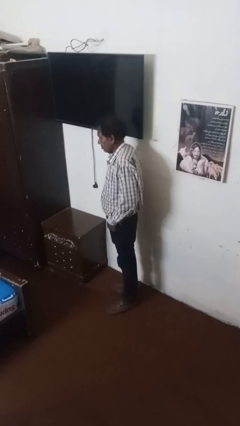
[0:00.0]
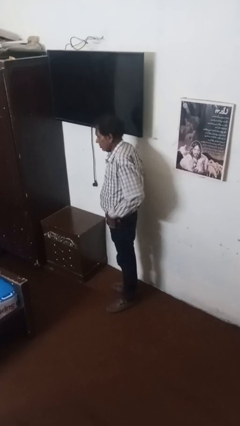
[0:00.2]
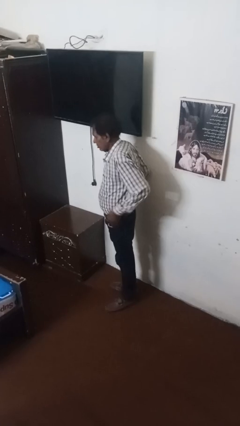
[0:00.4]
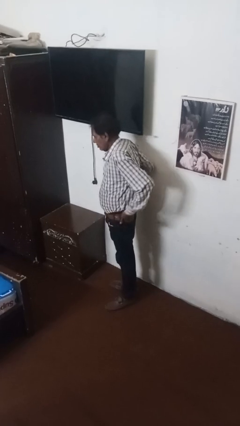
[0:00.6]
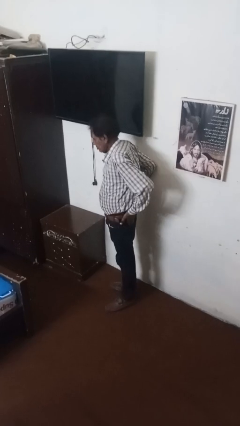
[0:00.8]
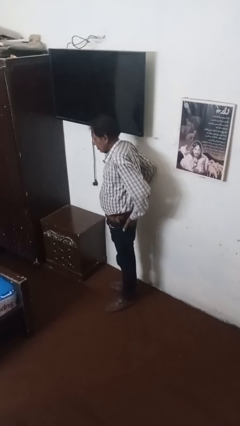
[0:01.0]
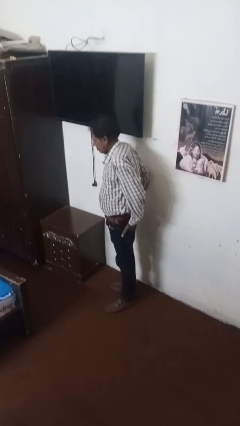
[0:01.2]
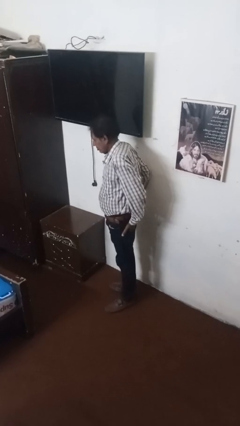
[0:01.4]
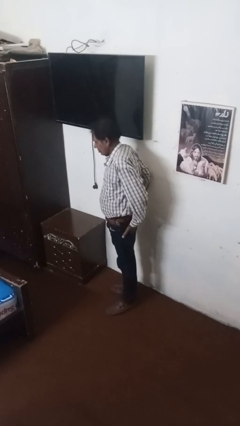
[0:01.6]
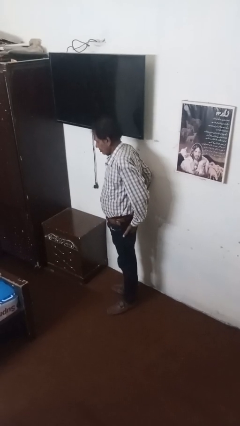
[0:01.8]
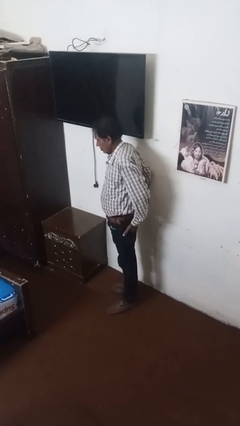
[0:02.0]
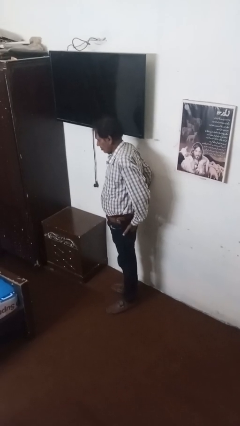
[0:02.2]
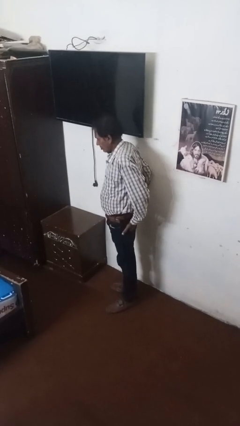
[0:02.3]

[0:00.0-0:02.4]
person puts hands in back pockets

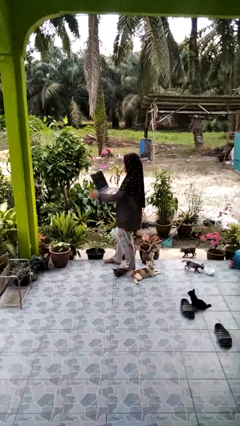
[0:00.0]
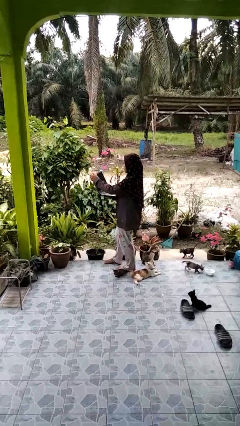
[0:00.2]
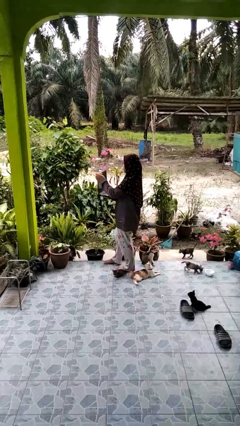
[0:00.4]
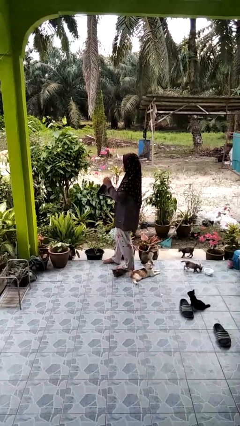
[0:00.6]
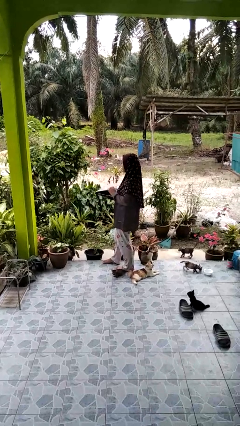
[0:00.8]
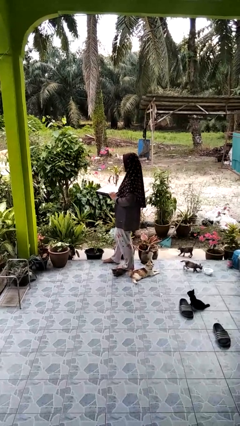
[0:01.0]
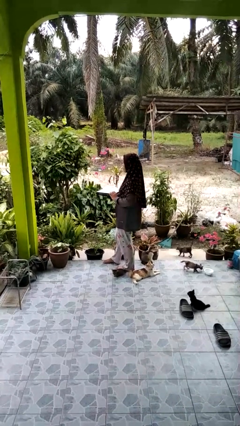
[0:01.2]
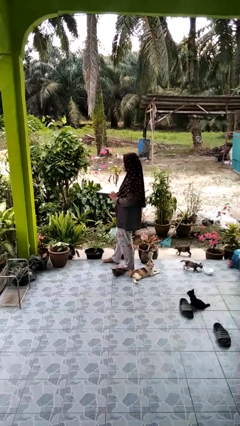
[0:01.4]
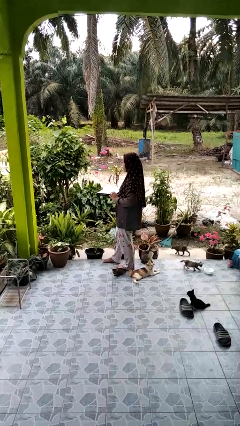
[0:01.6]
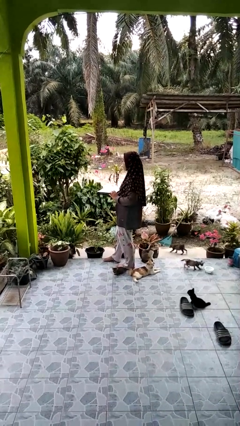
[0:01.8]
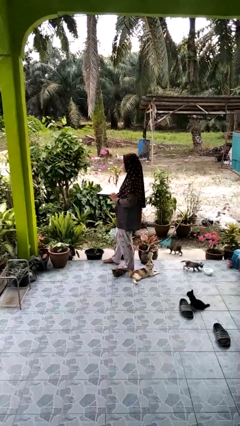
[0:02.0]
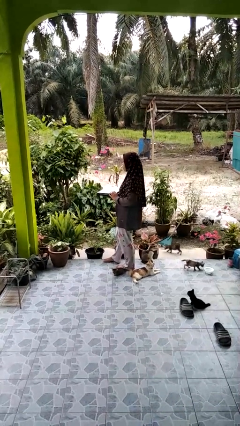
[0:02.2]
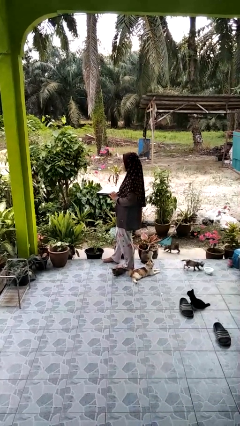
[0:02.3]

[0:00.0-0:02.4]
person closes laptop

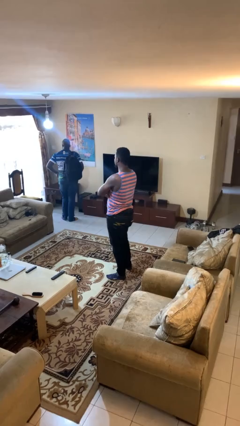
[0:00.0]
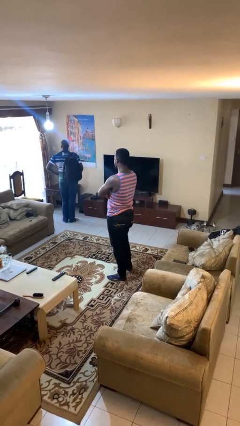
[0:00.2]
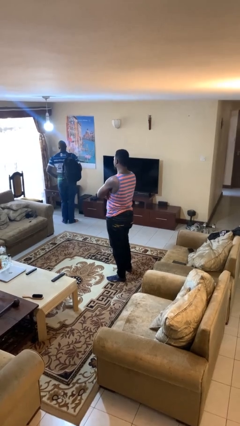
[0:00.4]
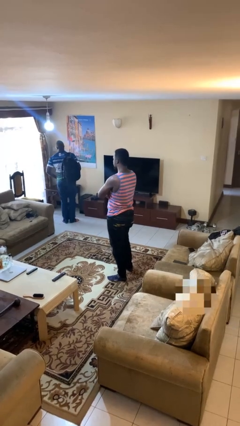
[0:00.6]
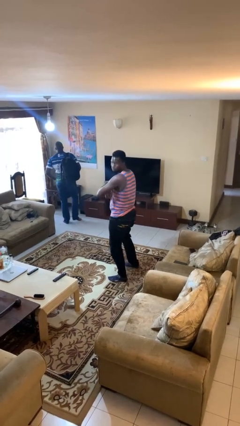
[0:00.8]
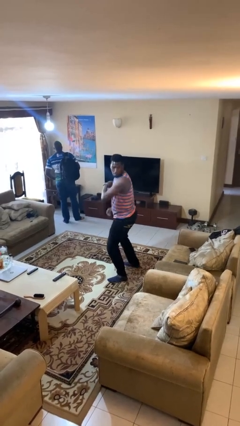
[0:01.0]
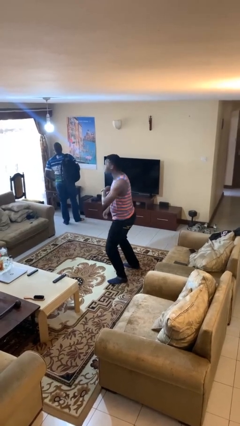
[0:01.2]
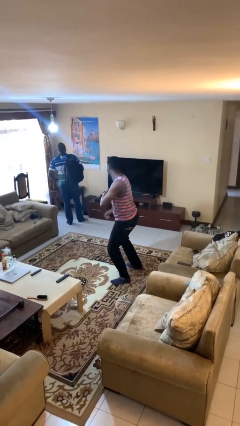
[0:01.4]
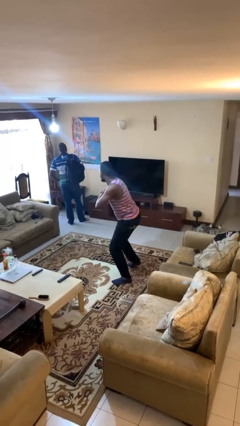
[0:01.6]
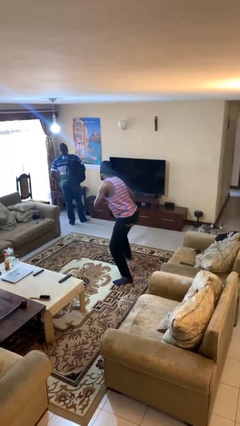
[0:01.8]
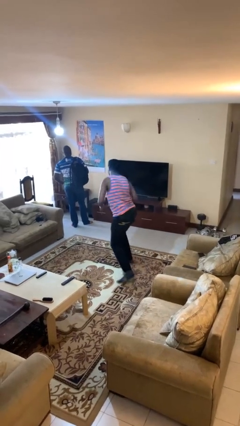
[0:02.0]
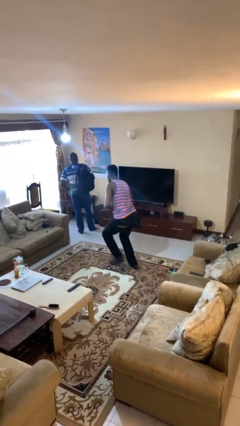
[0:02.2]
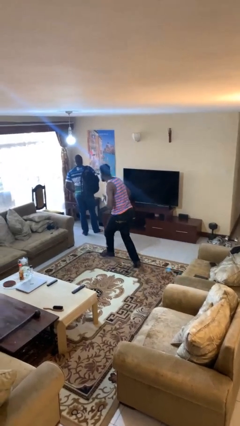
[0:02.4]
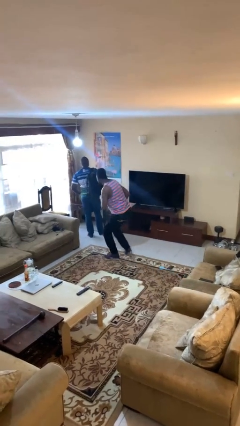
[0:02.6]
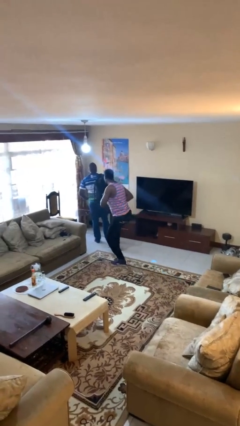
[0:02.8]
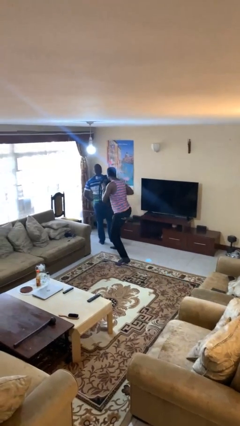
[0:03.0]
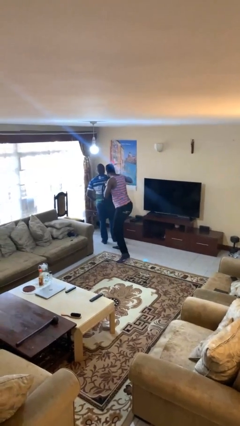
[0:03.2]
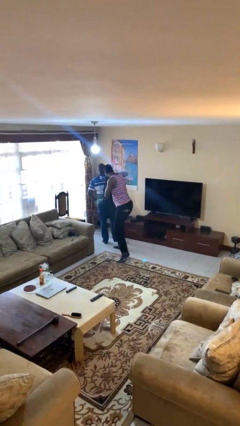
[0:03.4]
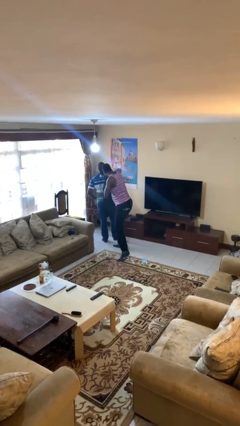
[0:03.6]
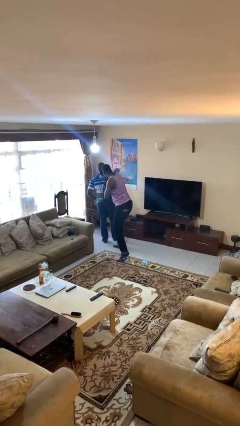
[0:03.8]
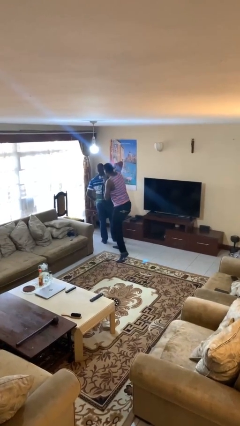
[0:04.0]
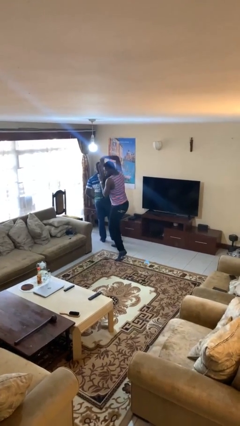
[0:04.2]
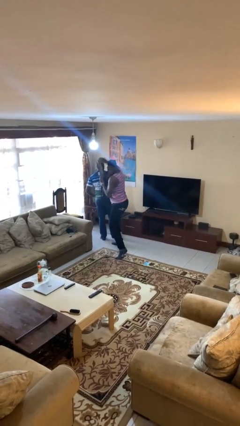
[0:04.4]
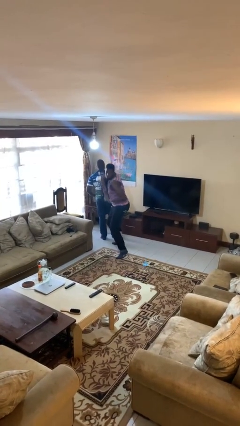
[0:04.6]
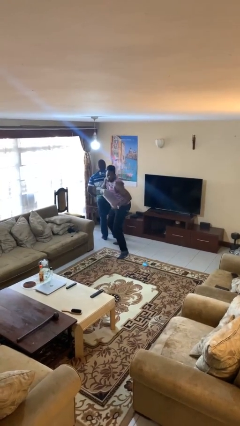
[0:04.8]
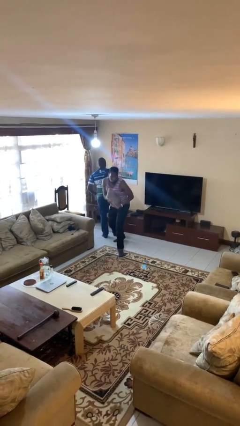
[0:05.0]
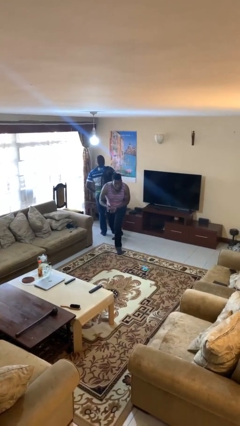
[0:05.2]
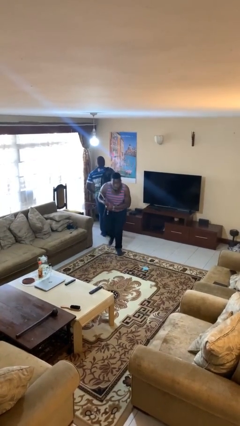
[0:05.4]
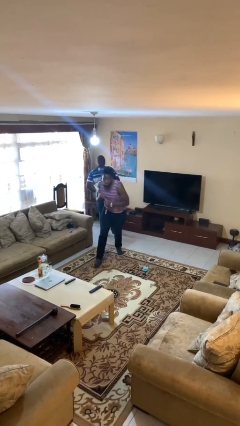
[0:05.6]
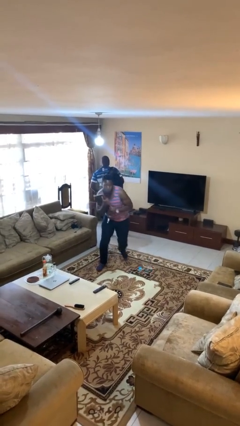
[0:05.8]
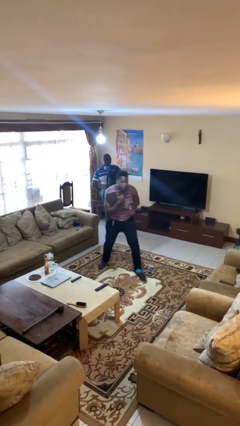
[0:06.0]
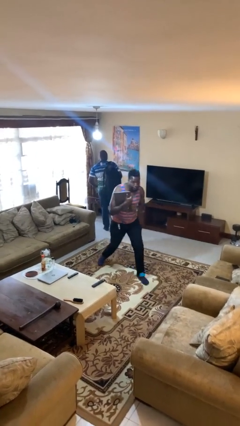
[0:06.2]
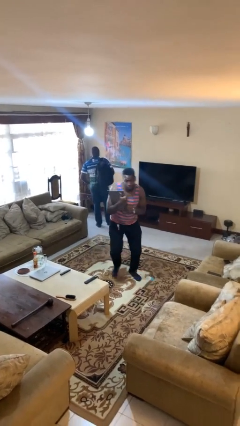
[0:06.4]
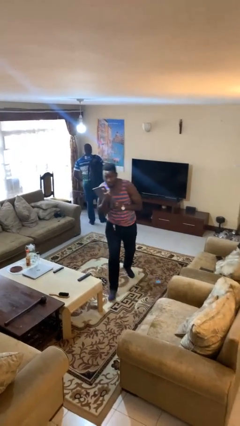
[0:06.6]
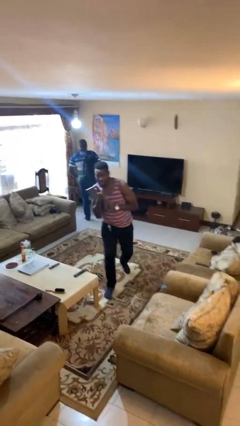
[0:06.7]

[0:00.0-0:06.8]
person steals object from person

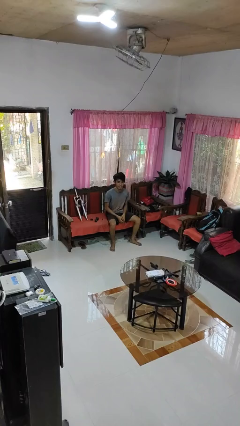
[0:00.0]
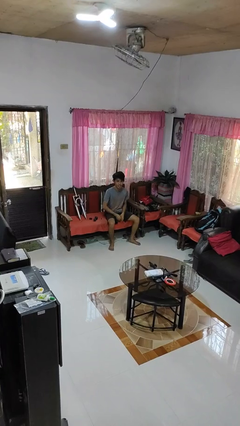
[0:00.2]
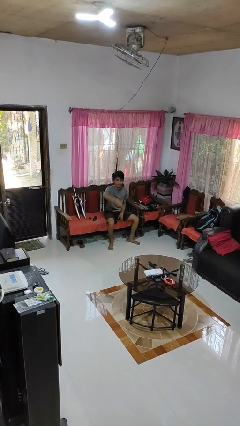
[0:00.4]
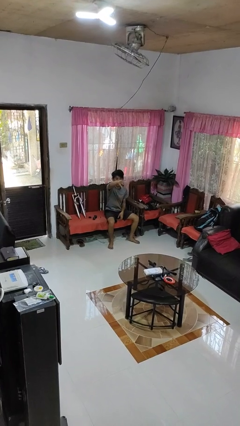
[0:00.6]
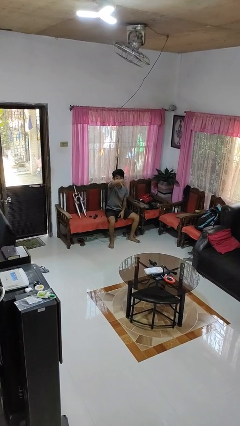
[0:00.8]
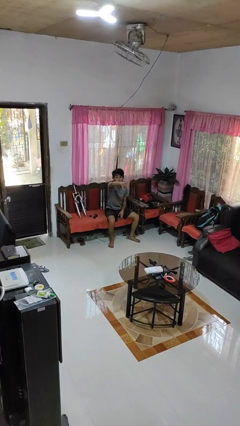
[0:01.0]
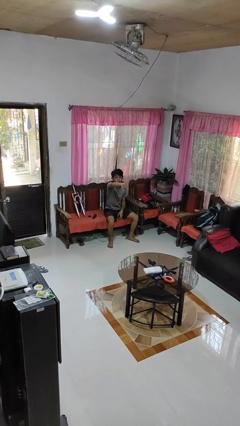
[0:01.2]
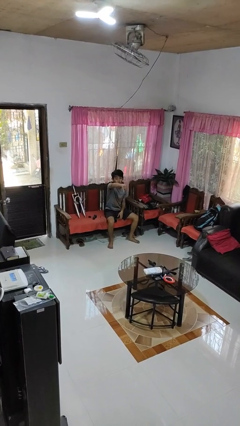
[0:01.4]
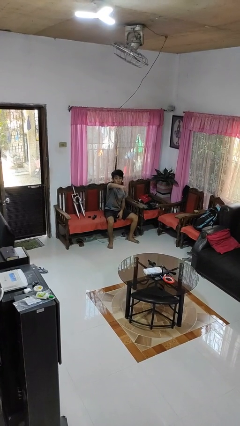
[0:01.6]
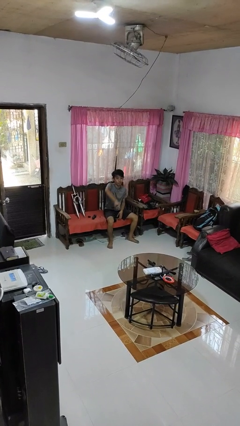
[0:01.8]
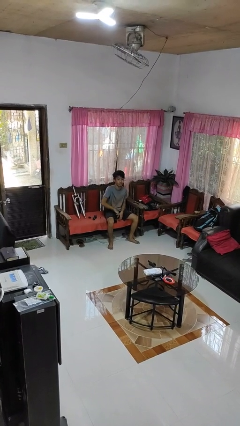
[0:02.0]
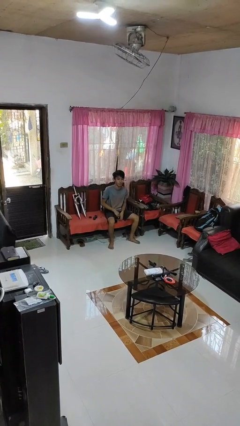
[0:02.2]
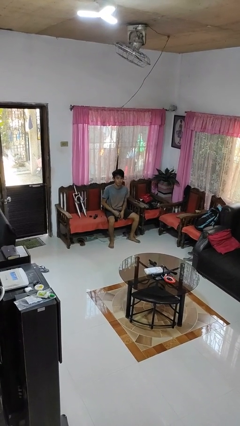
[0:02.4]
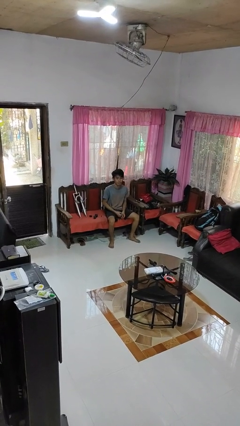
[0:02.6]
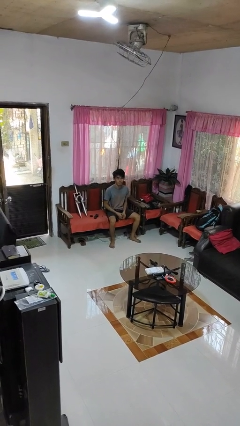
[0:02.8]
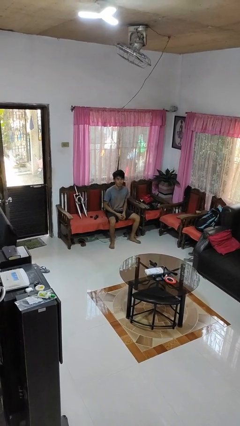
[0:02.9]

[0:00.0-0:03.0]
person gestures thumbs down

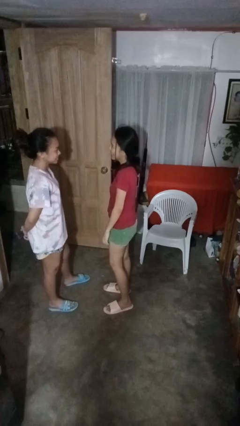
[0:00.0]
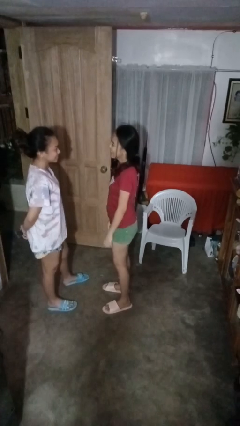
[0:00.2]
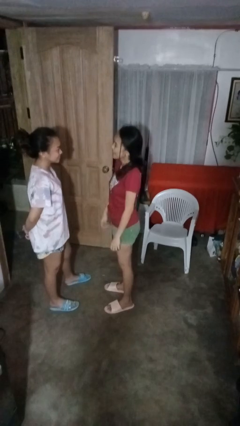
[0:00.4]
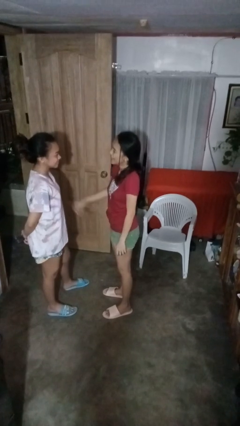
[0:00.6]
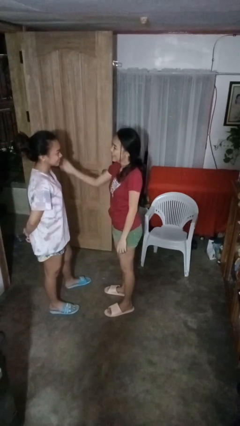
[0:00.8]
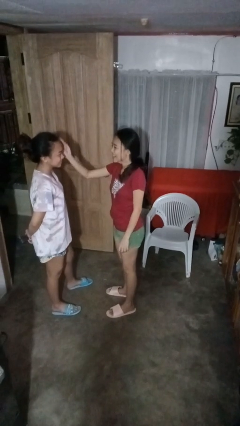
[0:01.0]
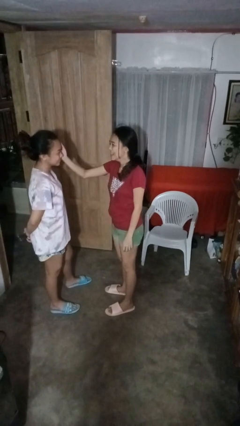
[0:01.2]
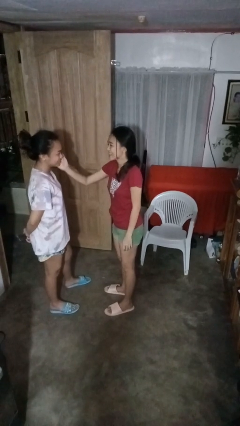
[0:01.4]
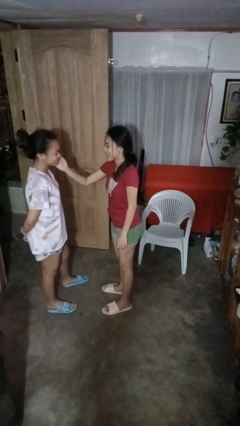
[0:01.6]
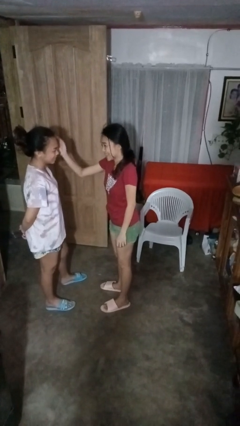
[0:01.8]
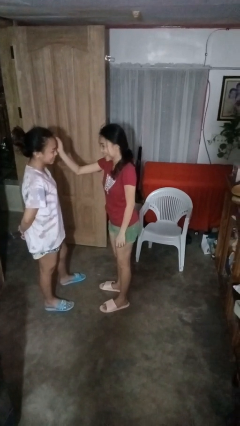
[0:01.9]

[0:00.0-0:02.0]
person touches face of person

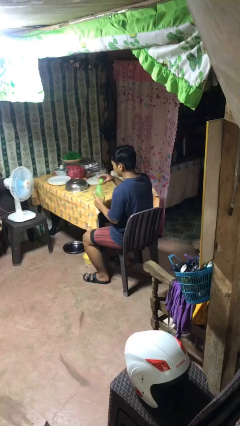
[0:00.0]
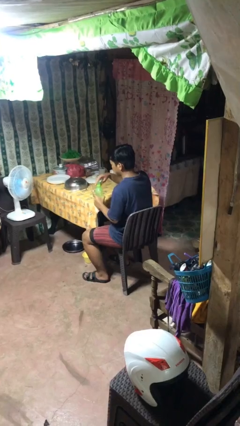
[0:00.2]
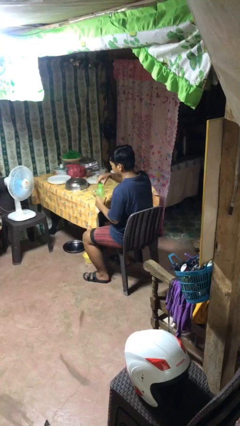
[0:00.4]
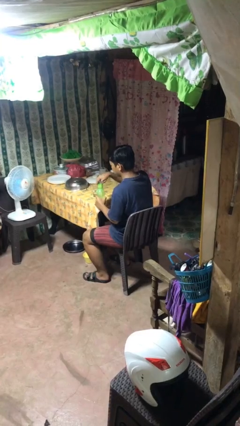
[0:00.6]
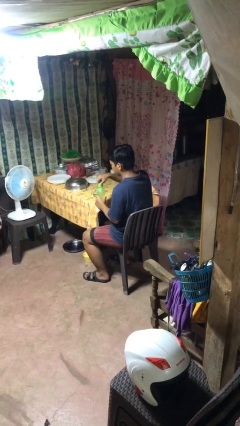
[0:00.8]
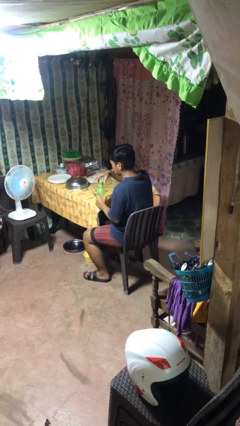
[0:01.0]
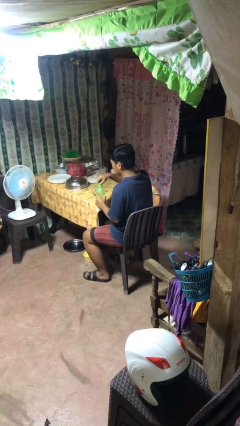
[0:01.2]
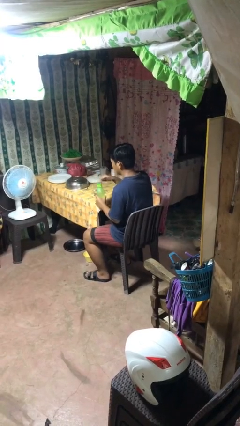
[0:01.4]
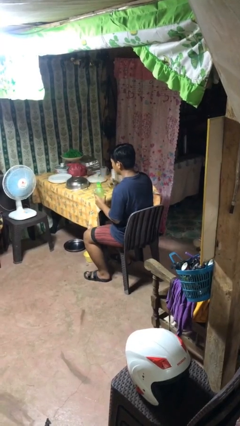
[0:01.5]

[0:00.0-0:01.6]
person screws lid to bottle
